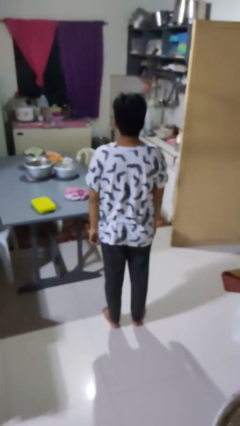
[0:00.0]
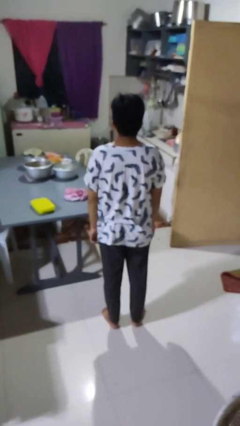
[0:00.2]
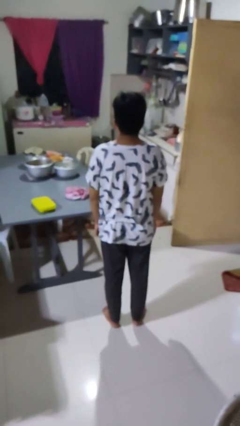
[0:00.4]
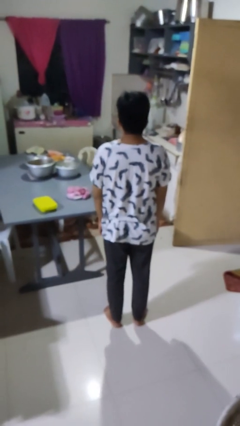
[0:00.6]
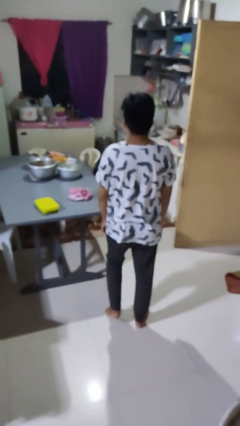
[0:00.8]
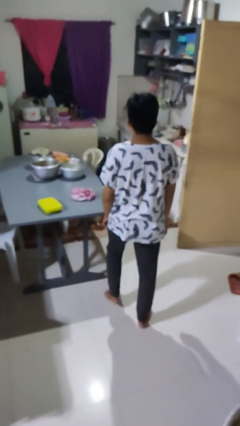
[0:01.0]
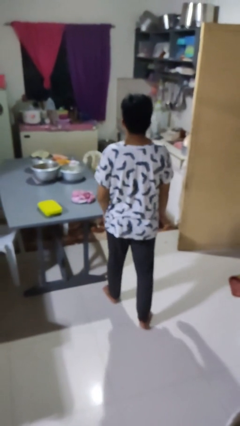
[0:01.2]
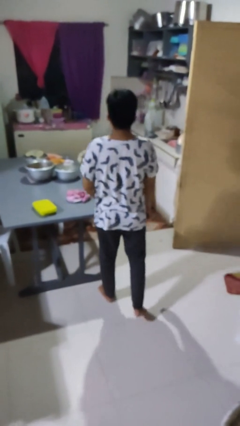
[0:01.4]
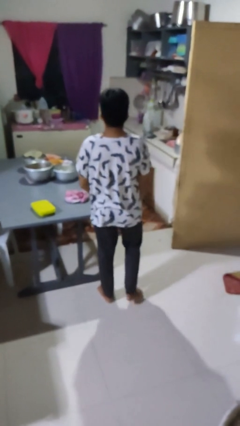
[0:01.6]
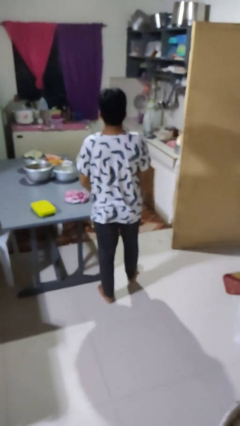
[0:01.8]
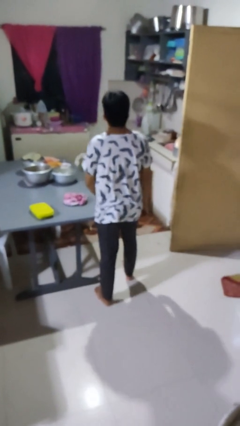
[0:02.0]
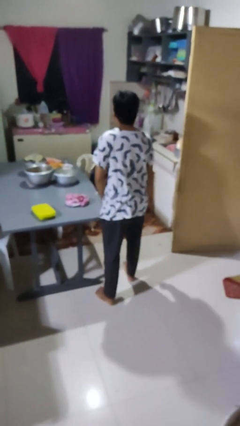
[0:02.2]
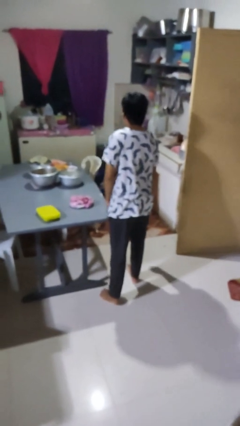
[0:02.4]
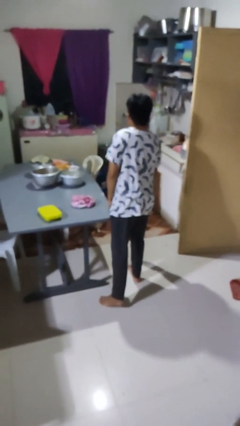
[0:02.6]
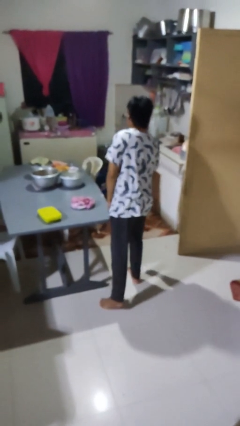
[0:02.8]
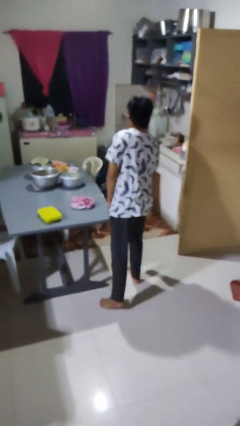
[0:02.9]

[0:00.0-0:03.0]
person bumps into table

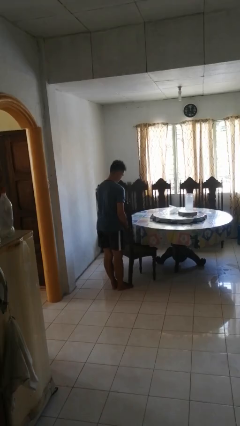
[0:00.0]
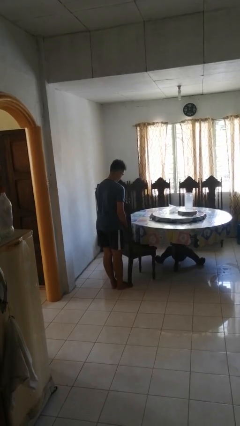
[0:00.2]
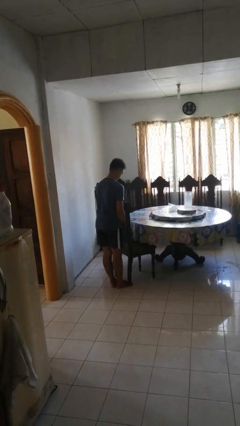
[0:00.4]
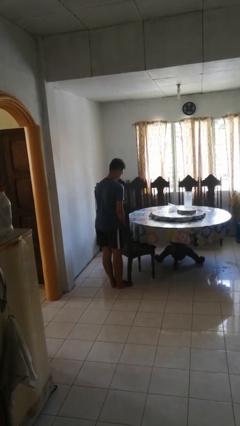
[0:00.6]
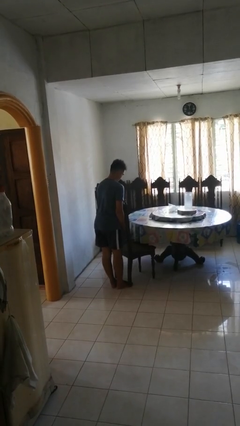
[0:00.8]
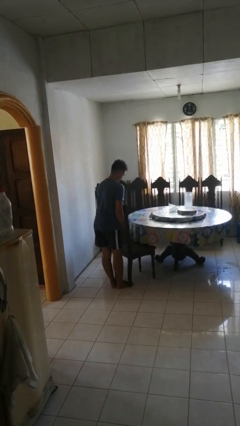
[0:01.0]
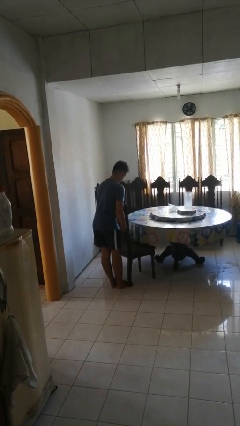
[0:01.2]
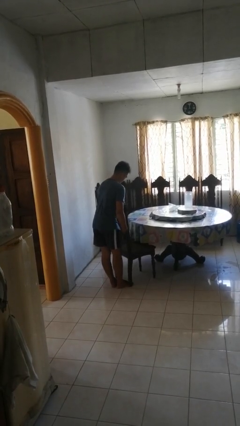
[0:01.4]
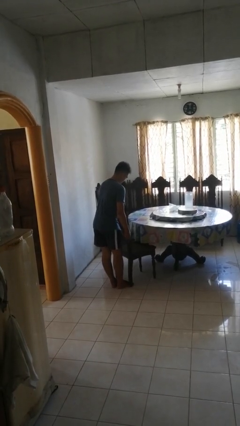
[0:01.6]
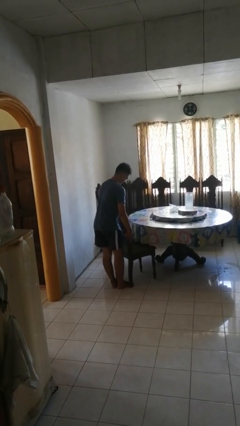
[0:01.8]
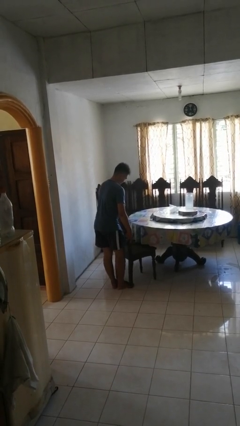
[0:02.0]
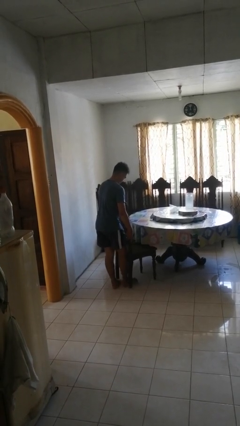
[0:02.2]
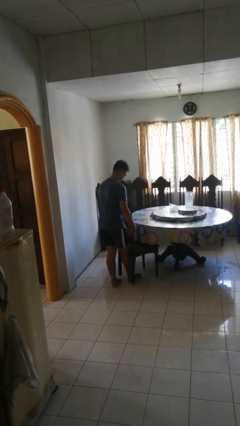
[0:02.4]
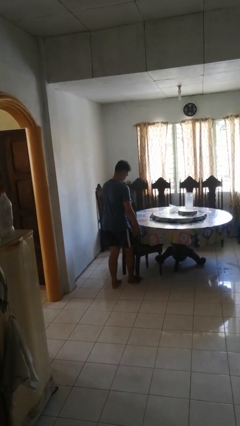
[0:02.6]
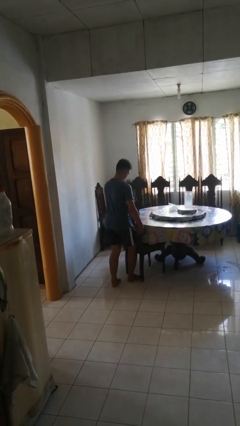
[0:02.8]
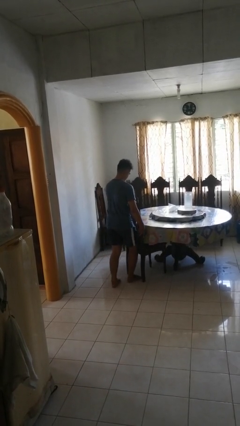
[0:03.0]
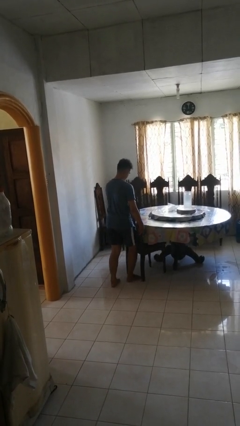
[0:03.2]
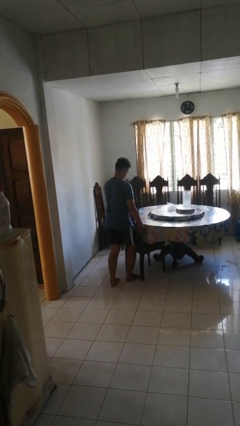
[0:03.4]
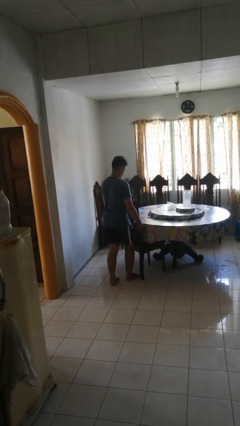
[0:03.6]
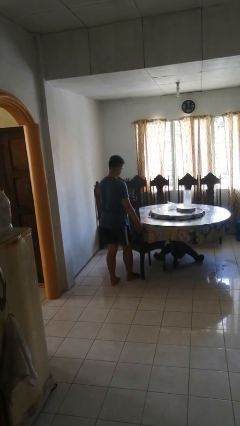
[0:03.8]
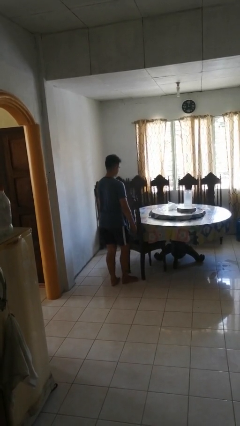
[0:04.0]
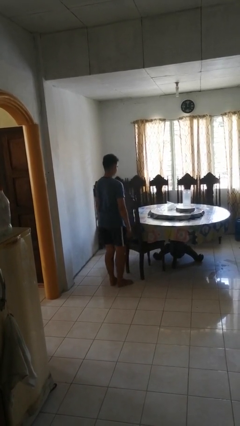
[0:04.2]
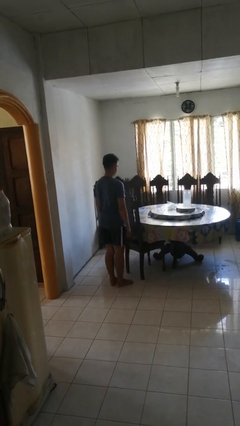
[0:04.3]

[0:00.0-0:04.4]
person pushes in chair

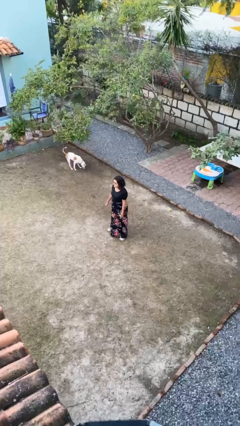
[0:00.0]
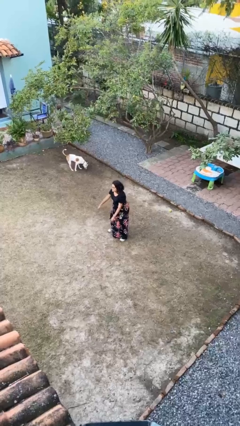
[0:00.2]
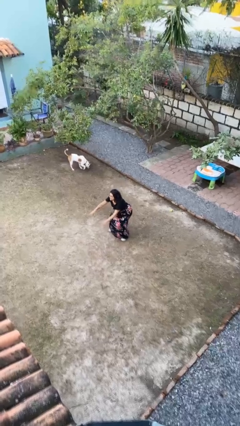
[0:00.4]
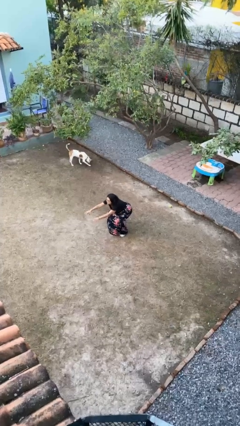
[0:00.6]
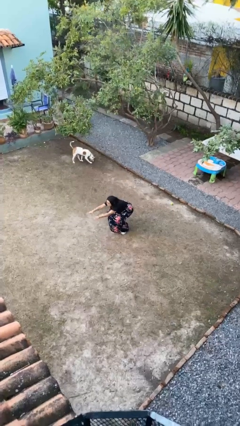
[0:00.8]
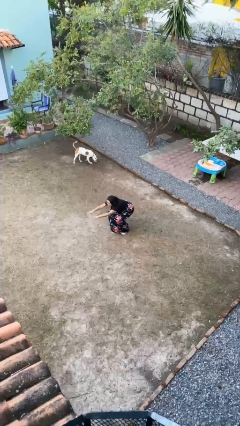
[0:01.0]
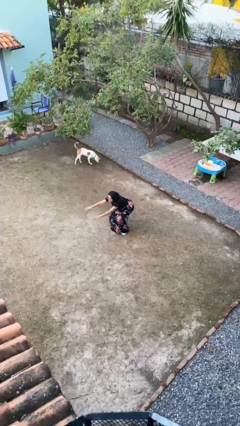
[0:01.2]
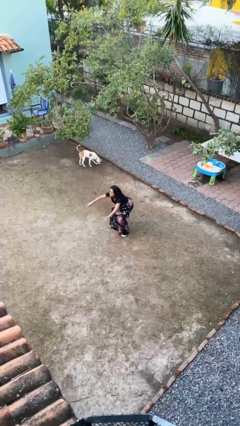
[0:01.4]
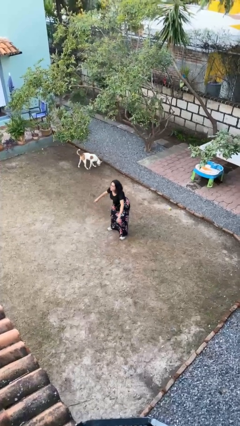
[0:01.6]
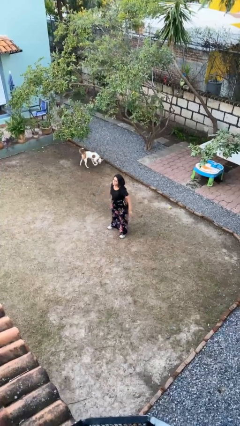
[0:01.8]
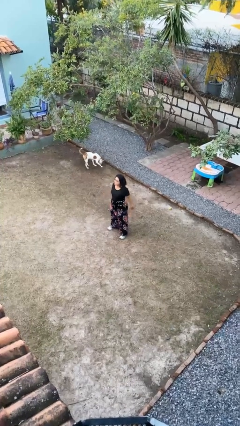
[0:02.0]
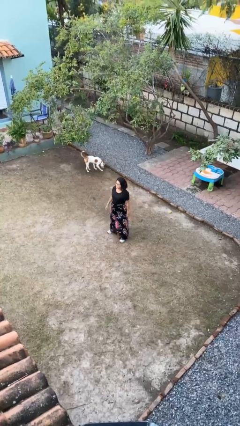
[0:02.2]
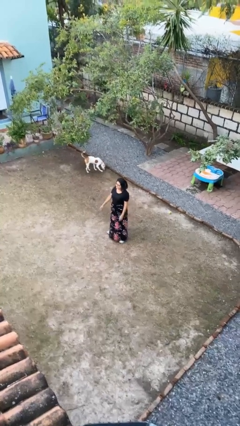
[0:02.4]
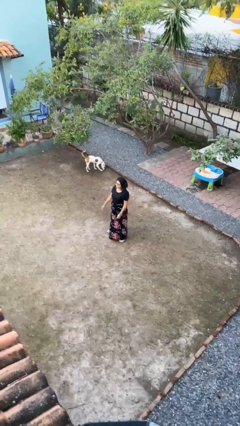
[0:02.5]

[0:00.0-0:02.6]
person exercises with situp

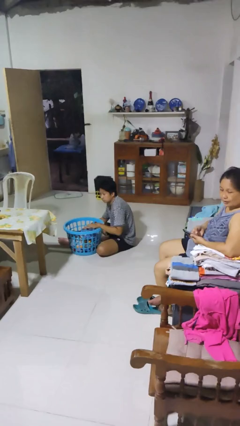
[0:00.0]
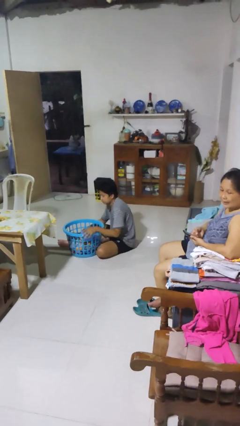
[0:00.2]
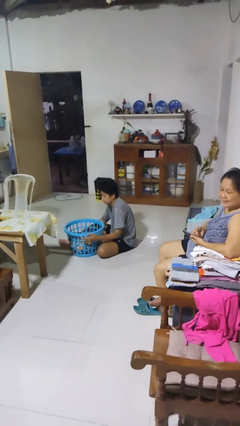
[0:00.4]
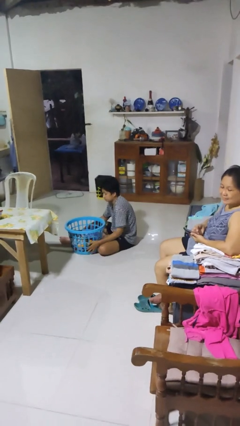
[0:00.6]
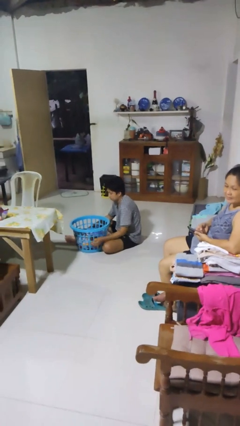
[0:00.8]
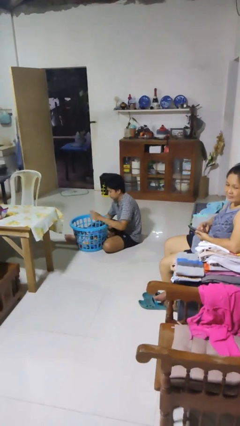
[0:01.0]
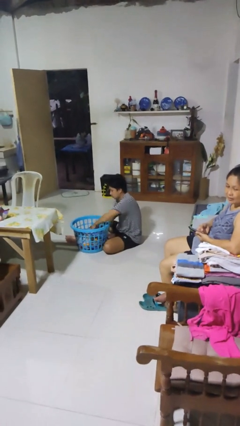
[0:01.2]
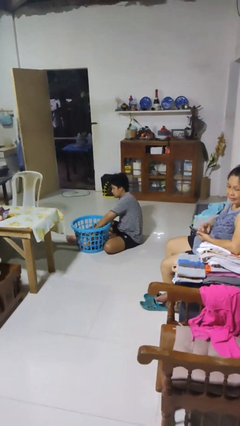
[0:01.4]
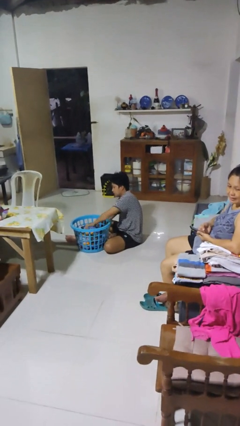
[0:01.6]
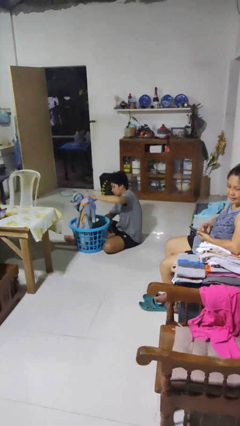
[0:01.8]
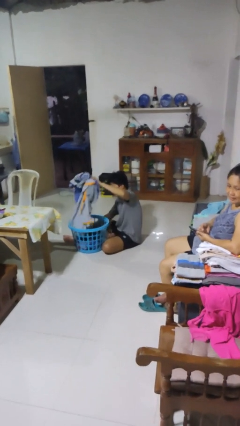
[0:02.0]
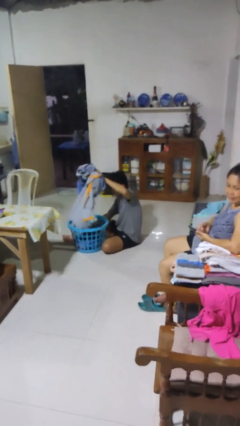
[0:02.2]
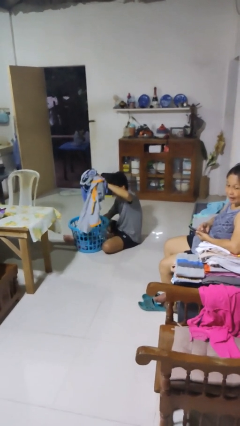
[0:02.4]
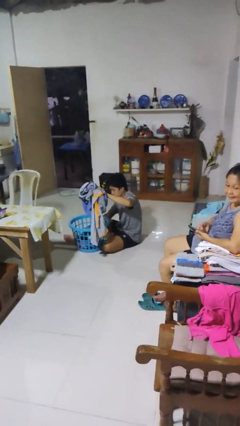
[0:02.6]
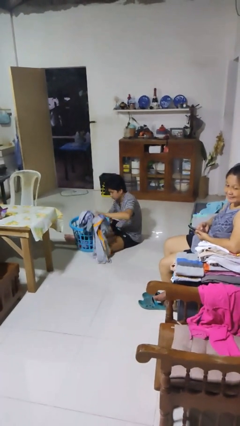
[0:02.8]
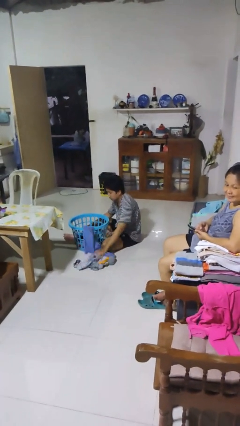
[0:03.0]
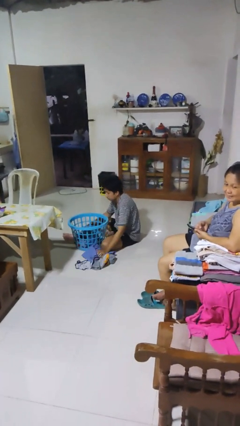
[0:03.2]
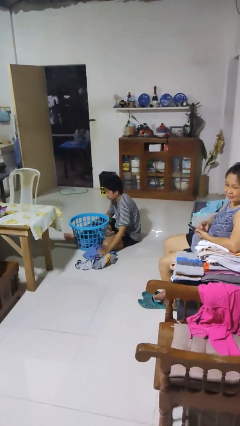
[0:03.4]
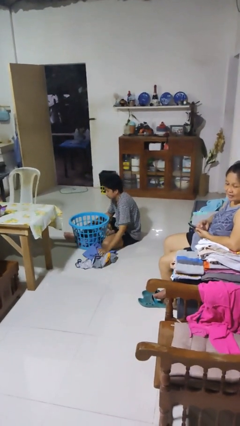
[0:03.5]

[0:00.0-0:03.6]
person unloads clotheswasher

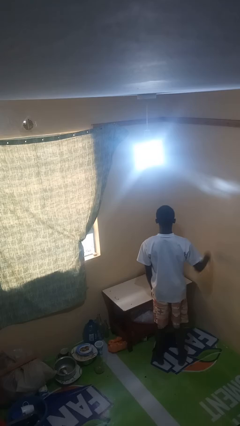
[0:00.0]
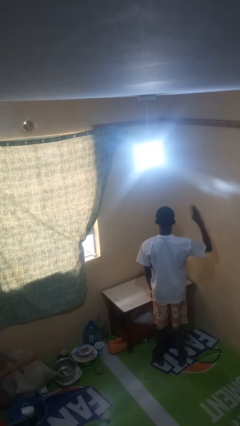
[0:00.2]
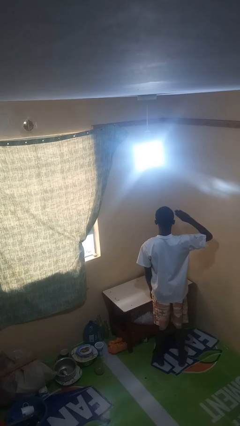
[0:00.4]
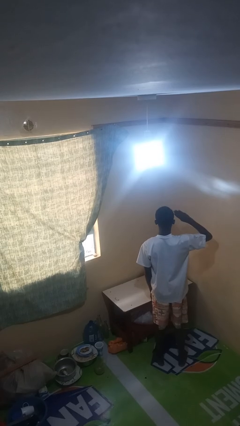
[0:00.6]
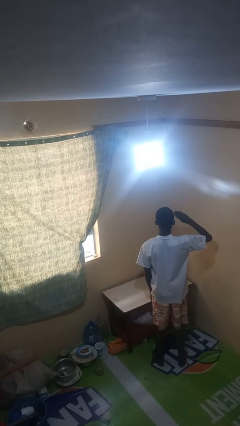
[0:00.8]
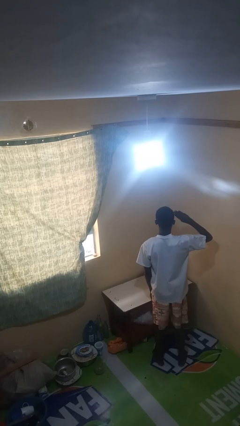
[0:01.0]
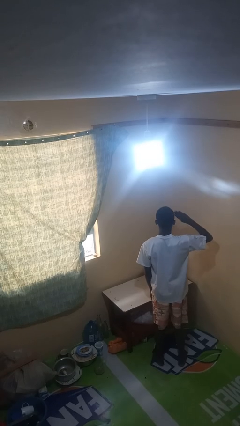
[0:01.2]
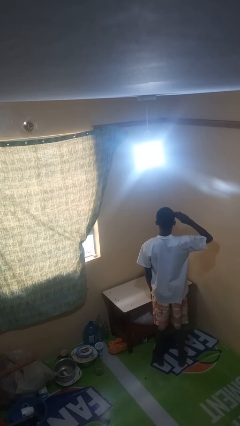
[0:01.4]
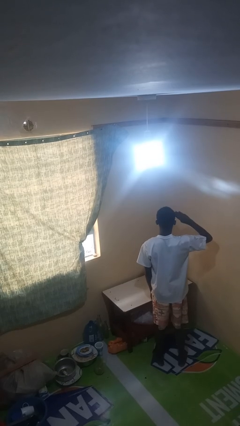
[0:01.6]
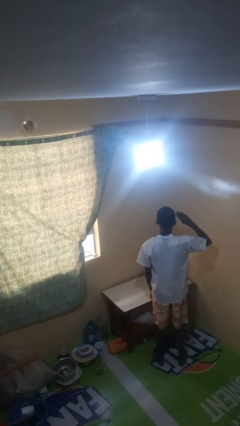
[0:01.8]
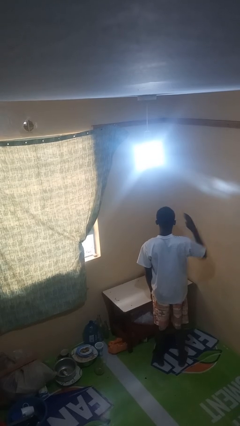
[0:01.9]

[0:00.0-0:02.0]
person salutes

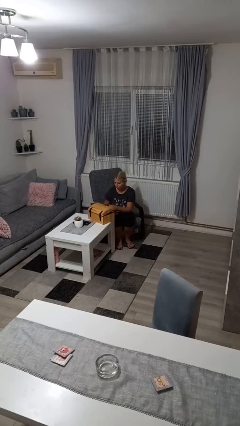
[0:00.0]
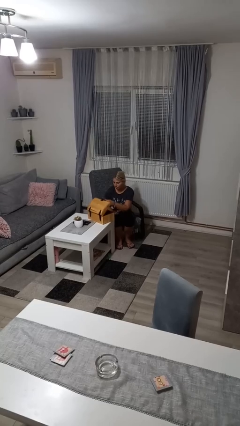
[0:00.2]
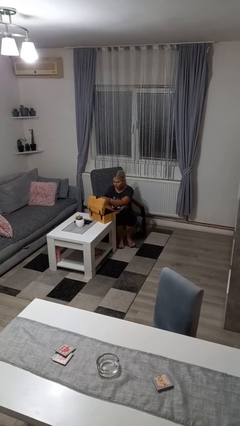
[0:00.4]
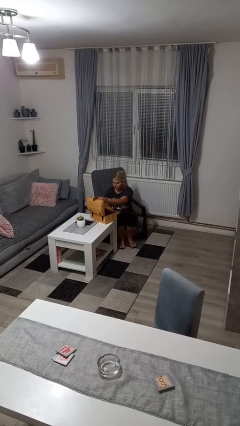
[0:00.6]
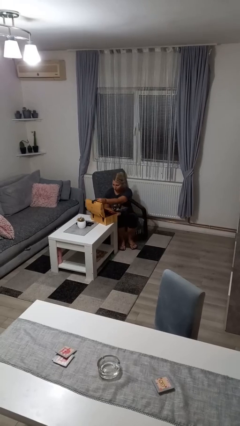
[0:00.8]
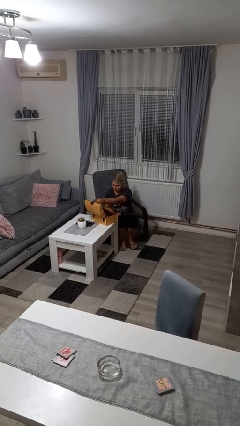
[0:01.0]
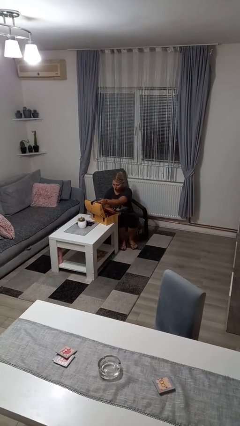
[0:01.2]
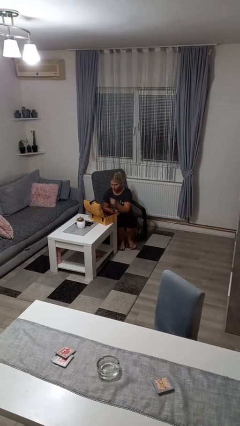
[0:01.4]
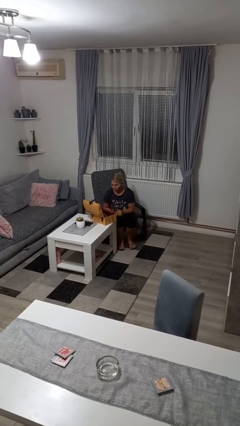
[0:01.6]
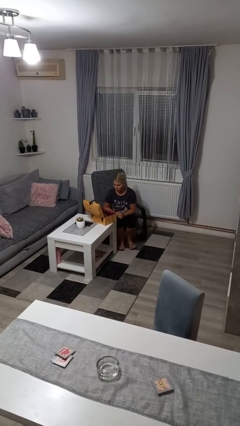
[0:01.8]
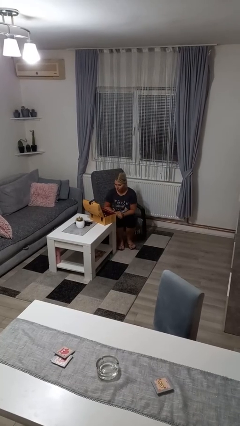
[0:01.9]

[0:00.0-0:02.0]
person opens jewelry box
